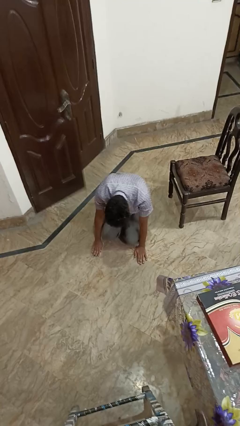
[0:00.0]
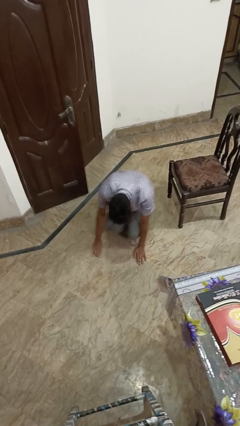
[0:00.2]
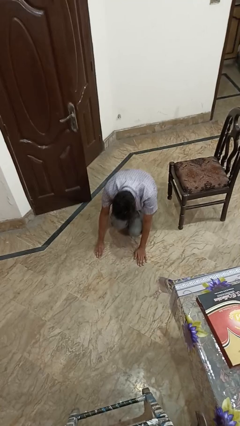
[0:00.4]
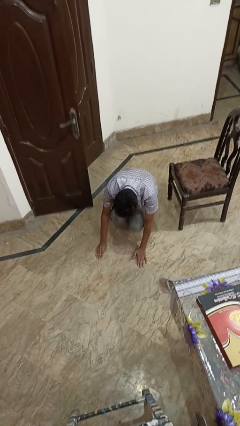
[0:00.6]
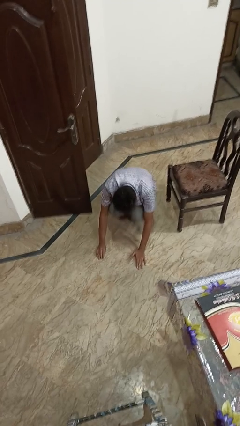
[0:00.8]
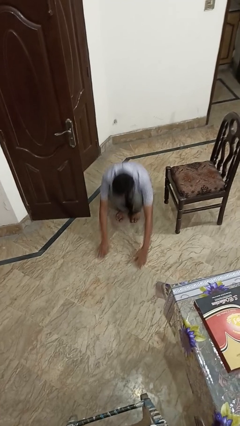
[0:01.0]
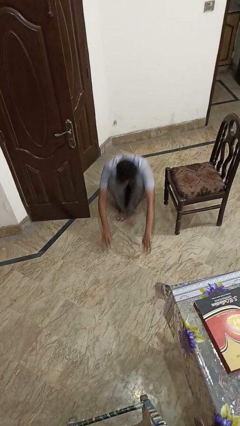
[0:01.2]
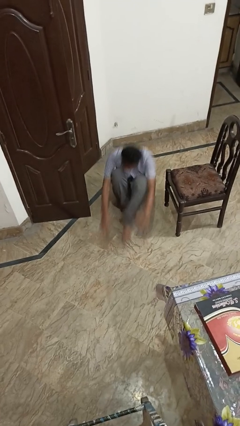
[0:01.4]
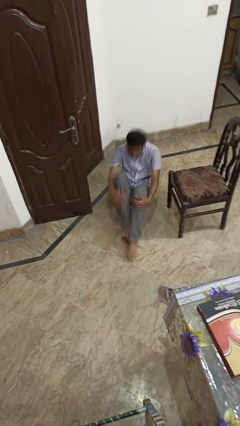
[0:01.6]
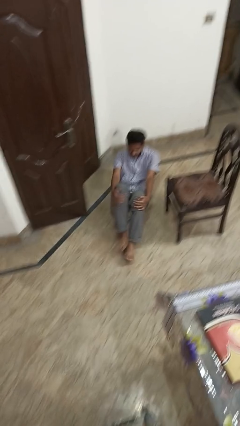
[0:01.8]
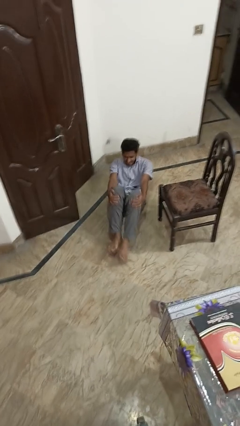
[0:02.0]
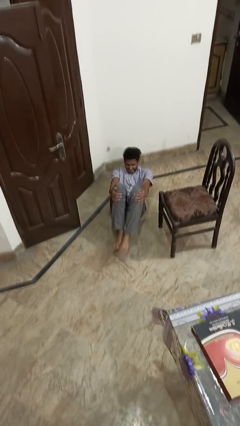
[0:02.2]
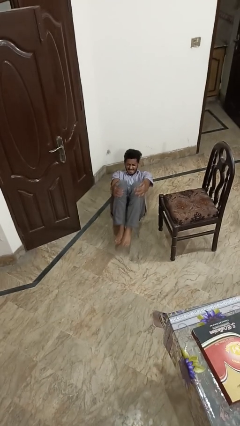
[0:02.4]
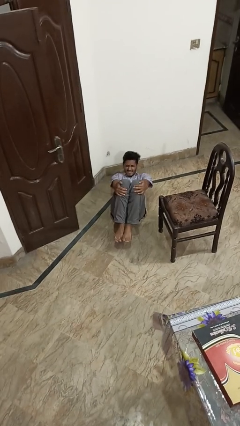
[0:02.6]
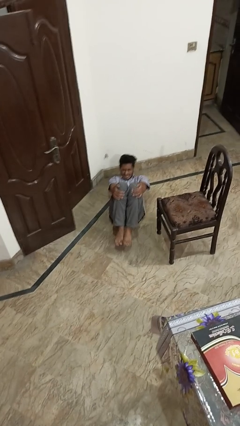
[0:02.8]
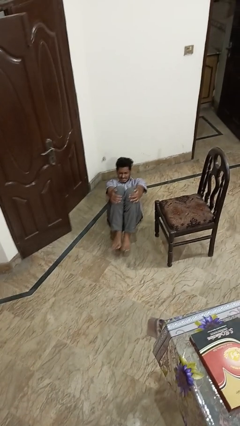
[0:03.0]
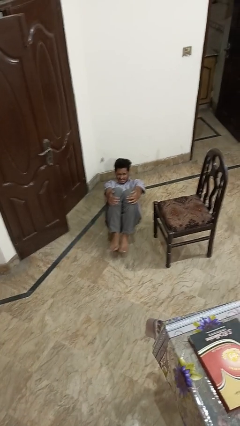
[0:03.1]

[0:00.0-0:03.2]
person lies down on floor

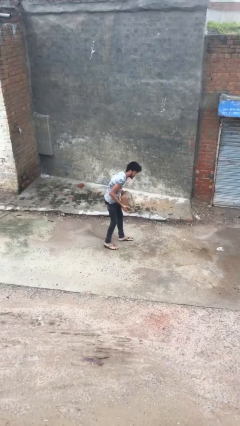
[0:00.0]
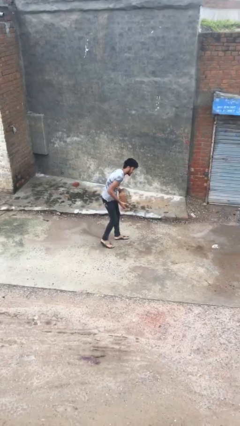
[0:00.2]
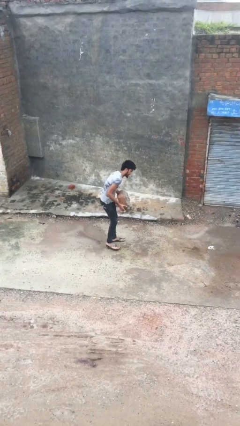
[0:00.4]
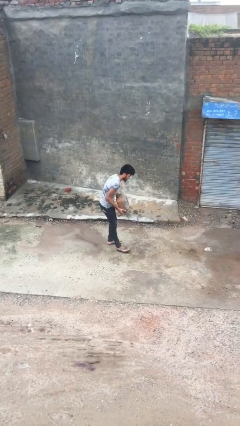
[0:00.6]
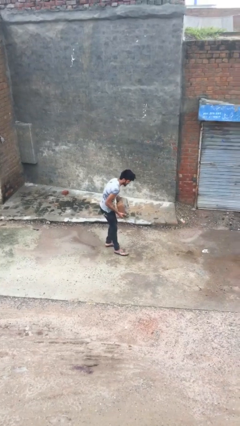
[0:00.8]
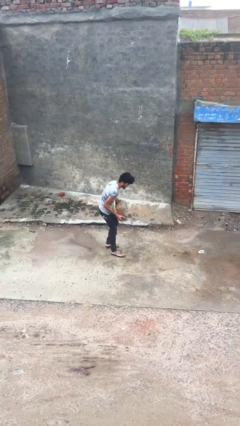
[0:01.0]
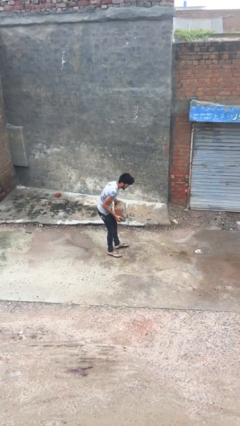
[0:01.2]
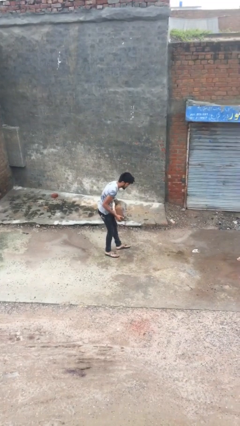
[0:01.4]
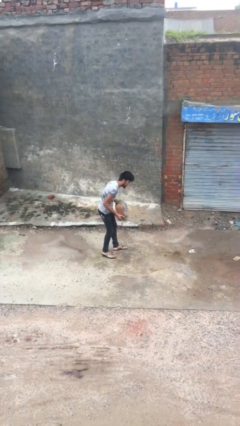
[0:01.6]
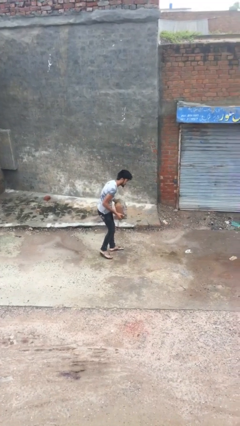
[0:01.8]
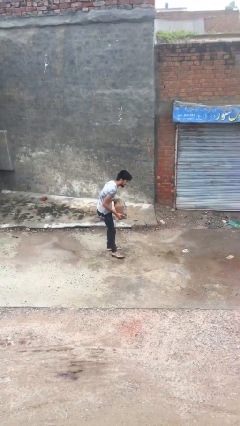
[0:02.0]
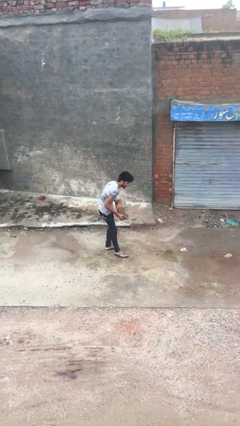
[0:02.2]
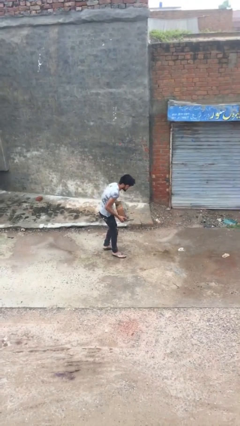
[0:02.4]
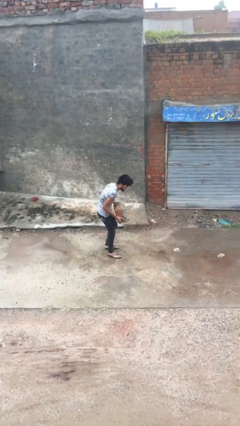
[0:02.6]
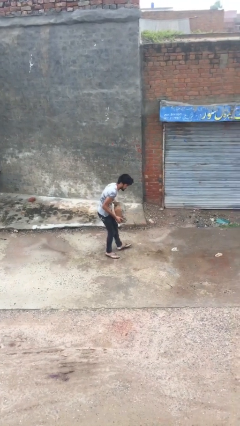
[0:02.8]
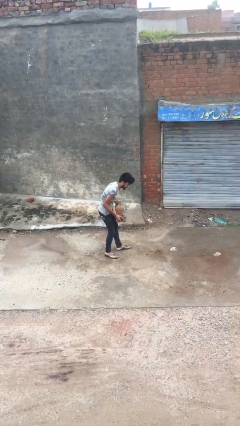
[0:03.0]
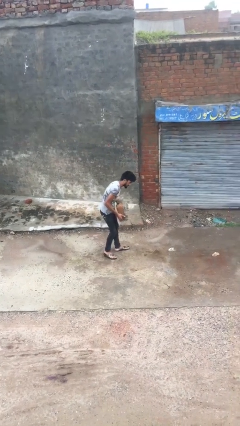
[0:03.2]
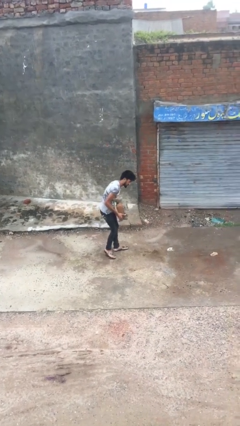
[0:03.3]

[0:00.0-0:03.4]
person carries heavy object

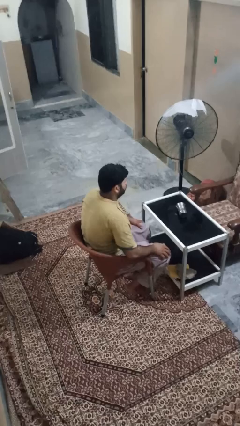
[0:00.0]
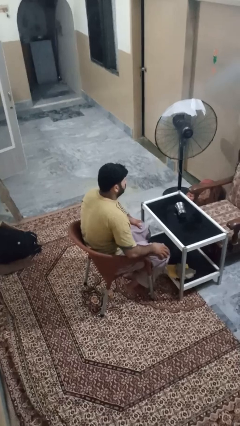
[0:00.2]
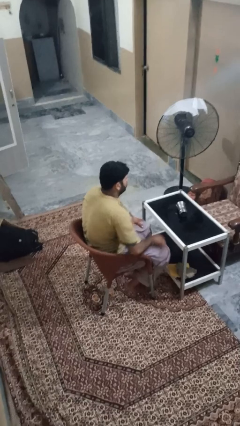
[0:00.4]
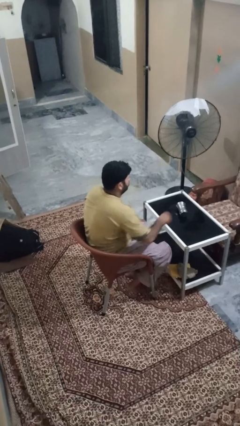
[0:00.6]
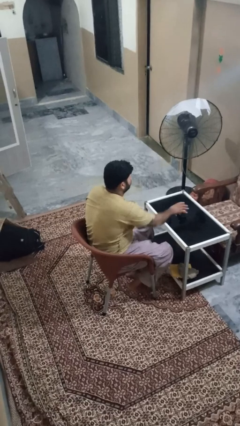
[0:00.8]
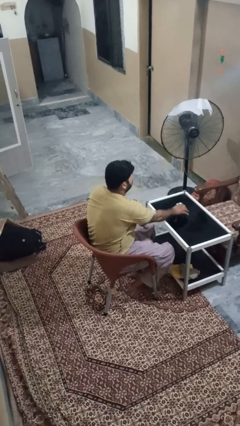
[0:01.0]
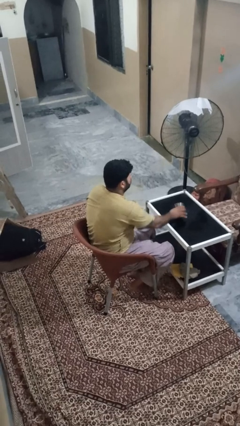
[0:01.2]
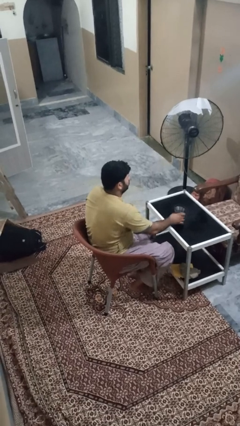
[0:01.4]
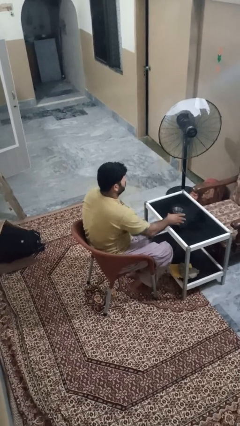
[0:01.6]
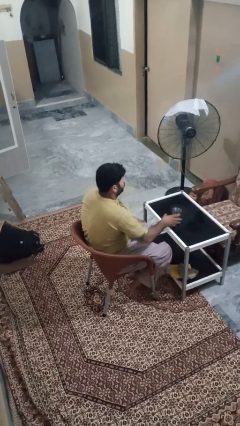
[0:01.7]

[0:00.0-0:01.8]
person sets upright glass

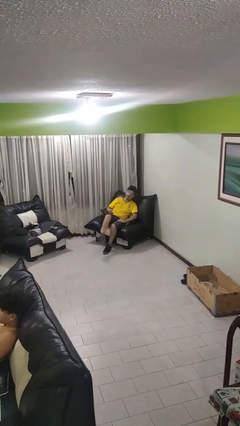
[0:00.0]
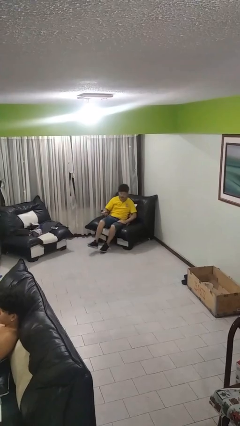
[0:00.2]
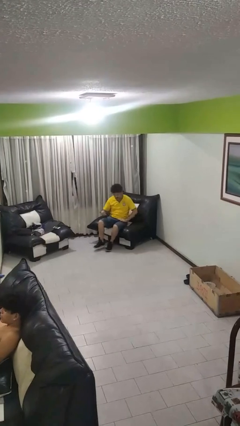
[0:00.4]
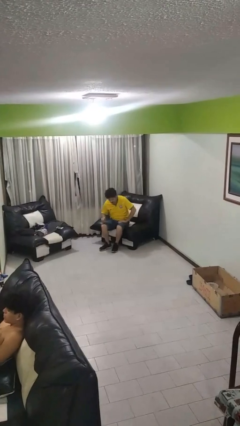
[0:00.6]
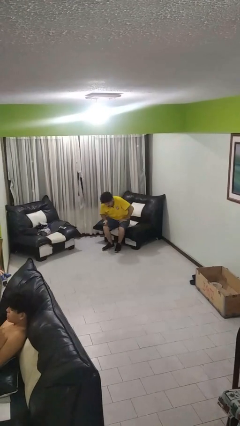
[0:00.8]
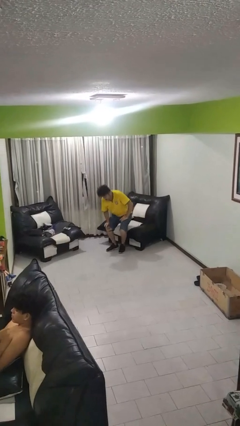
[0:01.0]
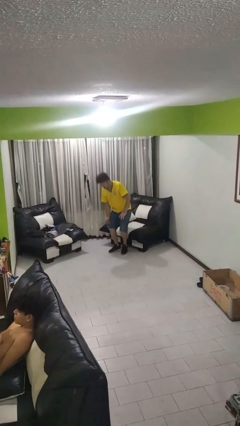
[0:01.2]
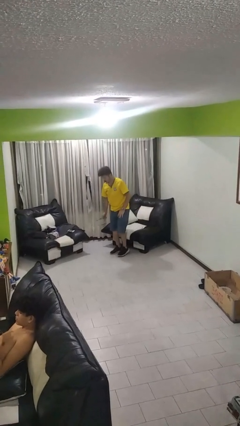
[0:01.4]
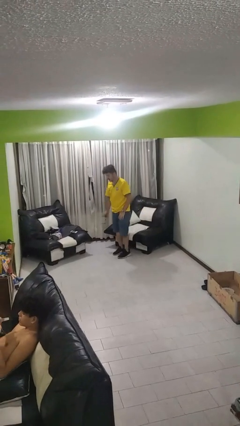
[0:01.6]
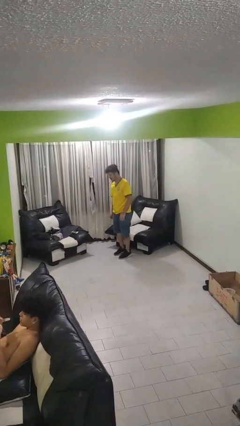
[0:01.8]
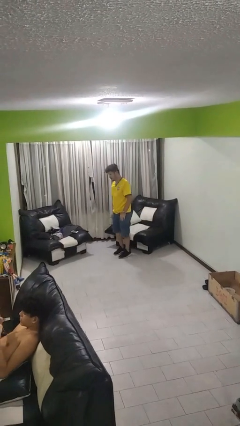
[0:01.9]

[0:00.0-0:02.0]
person stands up

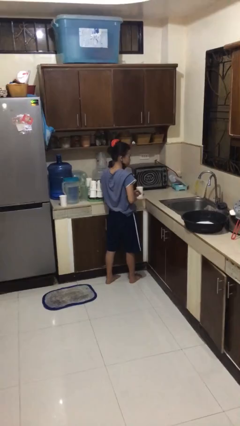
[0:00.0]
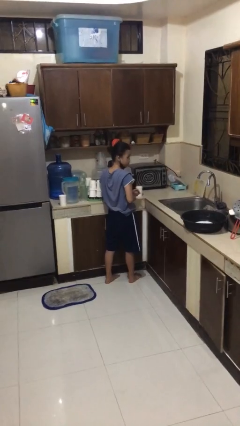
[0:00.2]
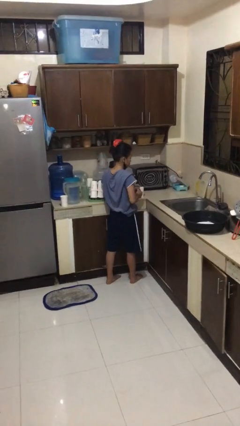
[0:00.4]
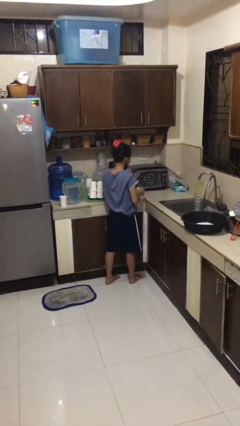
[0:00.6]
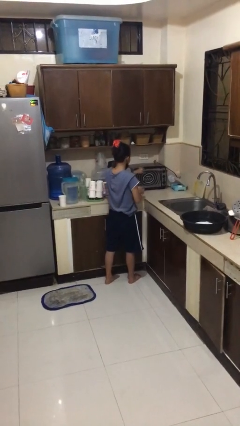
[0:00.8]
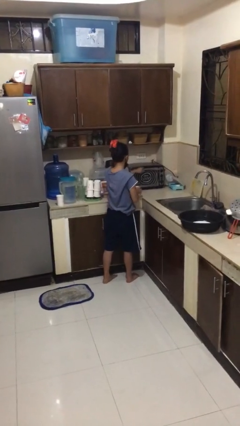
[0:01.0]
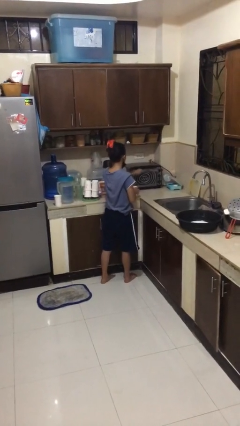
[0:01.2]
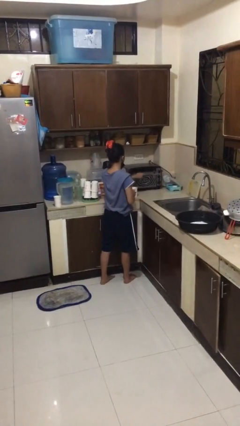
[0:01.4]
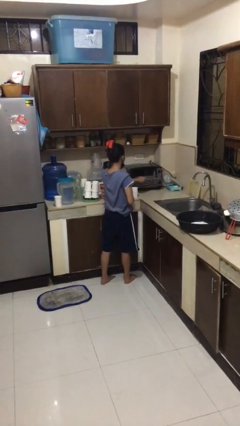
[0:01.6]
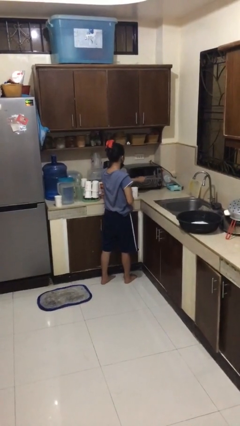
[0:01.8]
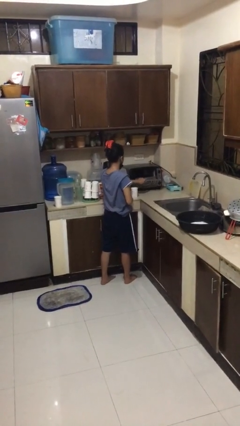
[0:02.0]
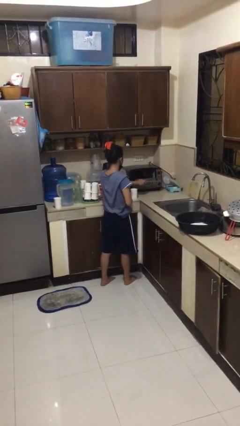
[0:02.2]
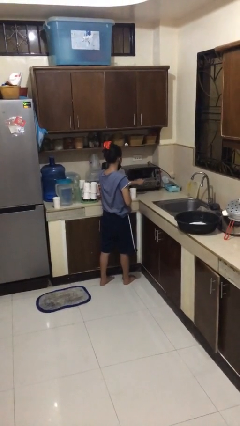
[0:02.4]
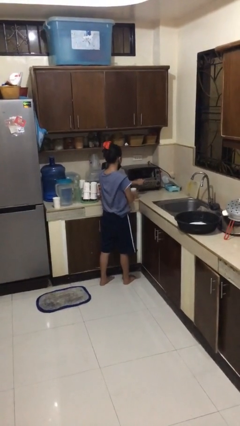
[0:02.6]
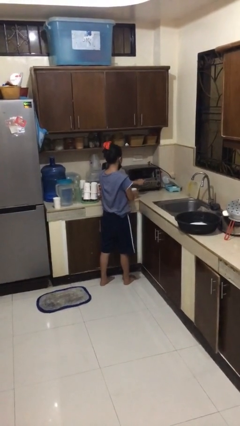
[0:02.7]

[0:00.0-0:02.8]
person opens microwave

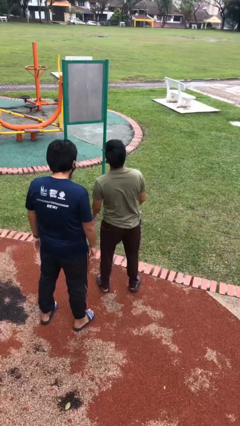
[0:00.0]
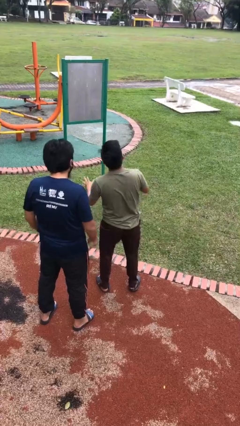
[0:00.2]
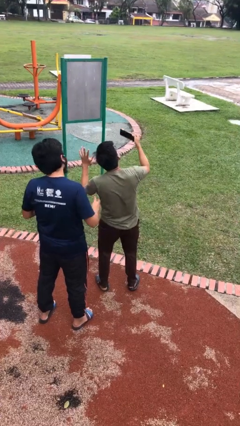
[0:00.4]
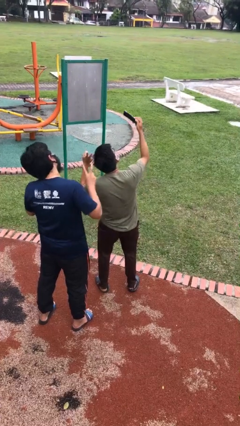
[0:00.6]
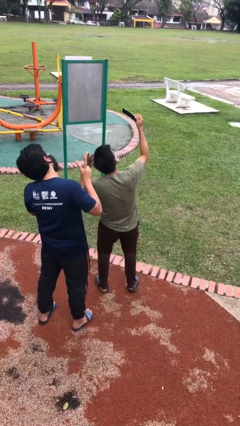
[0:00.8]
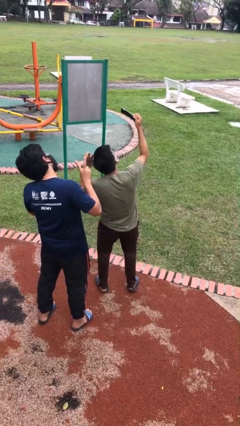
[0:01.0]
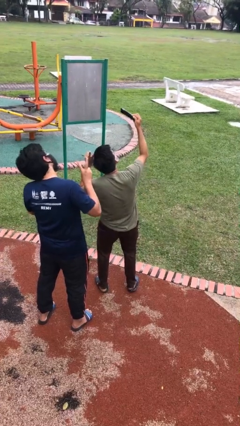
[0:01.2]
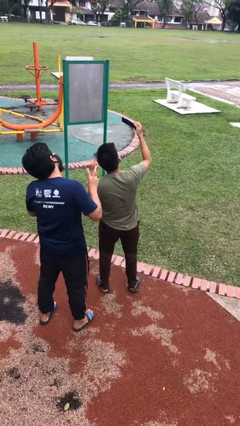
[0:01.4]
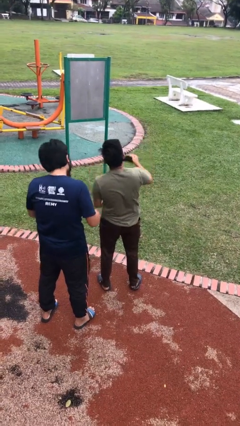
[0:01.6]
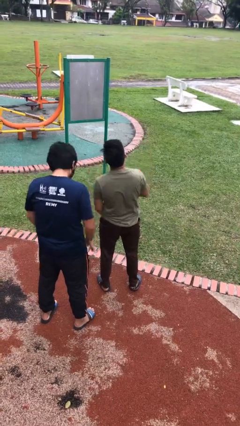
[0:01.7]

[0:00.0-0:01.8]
person takes selfie with person

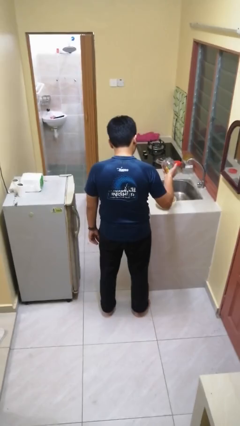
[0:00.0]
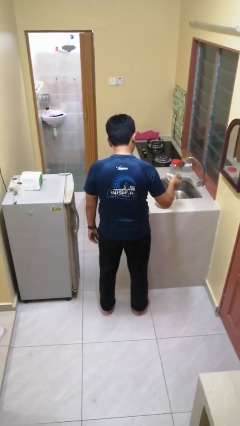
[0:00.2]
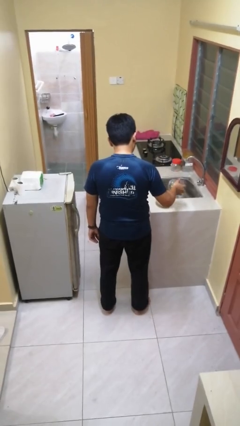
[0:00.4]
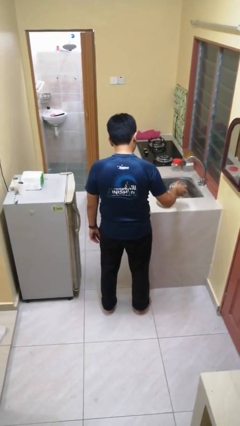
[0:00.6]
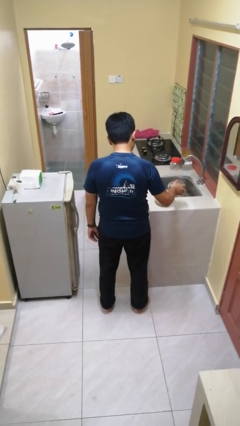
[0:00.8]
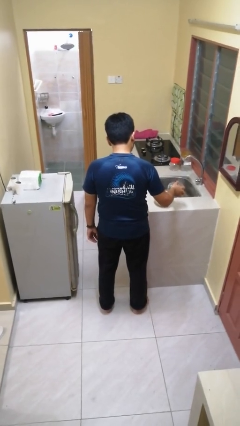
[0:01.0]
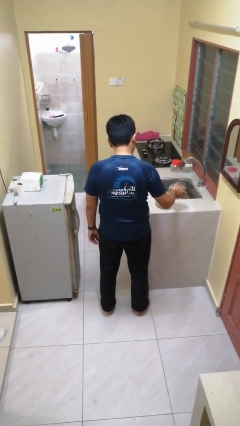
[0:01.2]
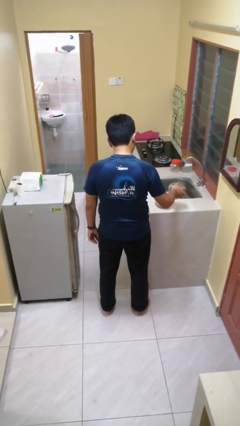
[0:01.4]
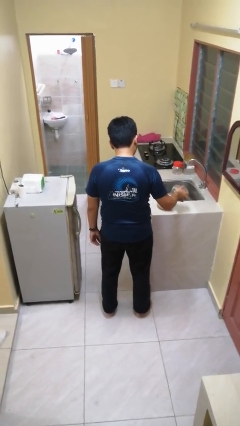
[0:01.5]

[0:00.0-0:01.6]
person pours into bowl

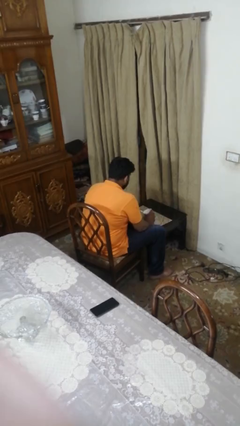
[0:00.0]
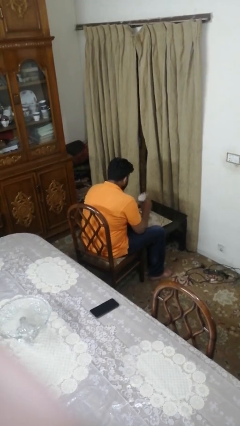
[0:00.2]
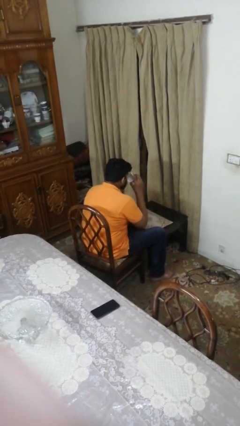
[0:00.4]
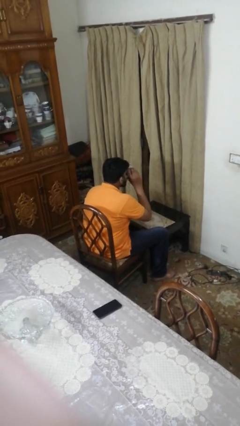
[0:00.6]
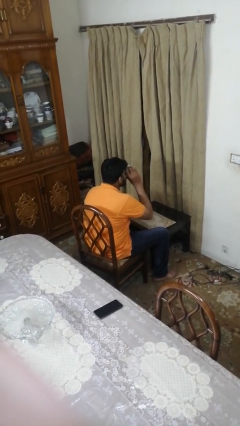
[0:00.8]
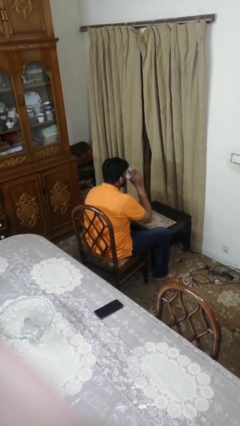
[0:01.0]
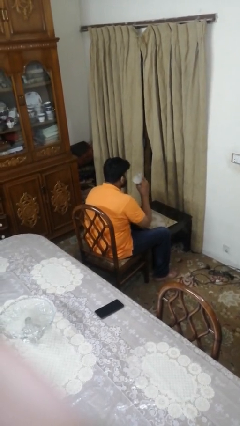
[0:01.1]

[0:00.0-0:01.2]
person drinks from mug
